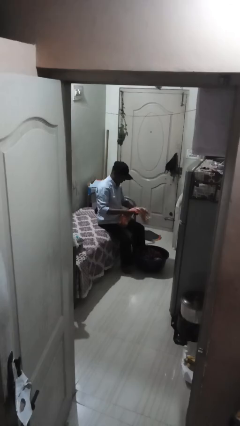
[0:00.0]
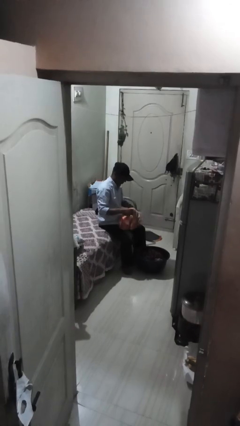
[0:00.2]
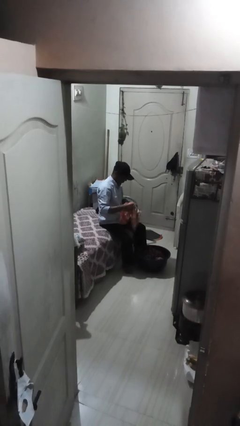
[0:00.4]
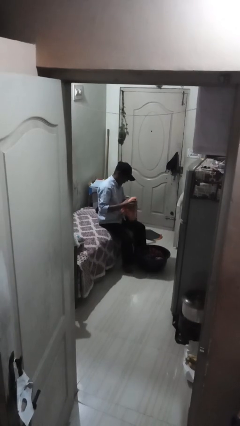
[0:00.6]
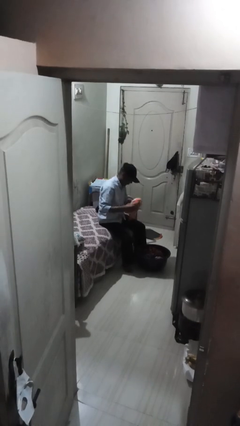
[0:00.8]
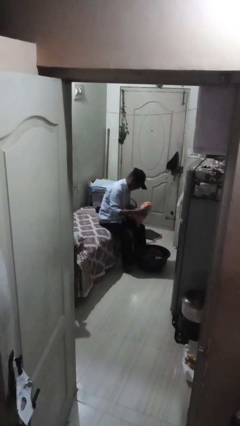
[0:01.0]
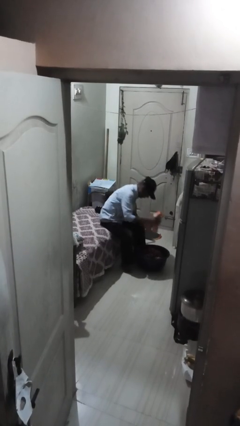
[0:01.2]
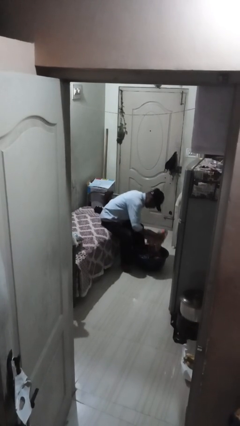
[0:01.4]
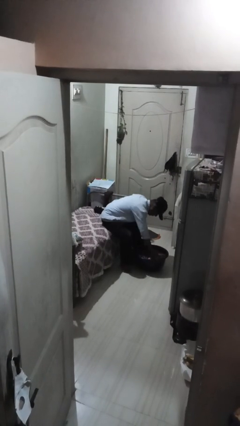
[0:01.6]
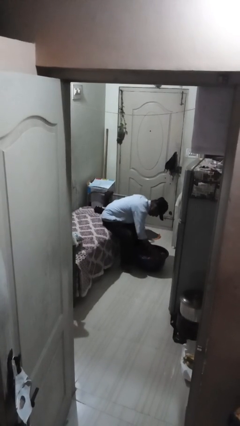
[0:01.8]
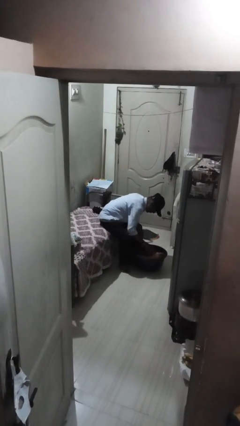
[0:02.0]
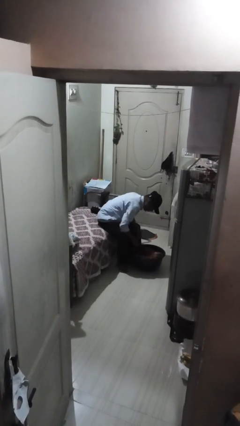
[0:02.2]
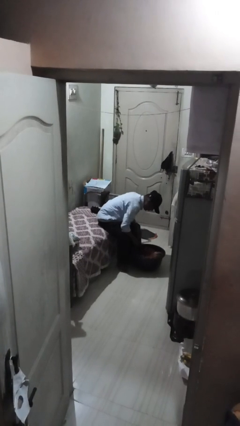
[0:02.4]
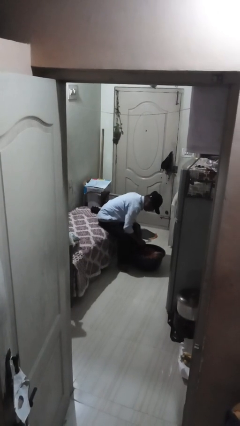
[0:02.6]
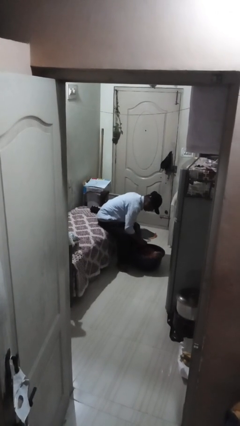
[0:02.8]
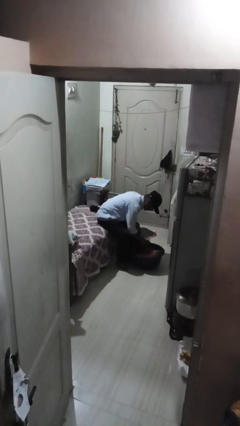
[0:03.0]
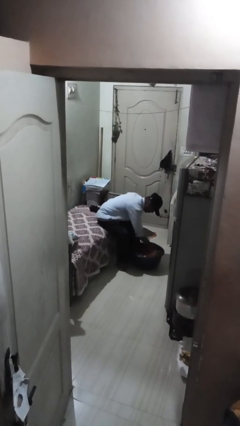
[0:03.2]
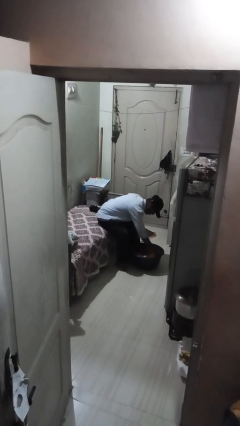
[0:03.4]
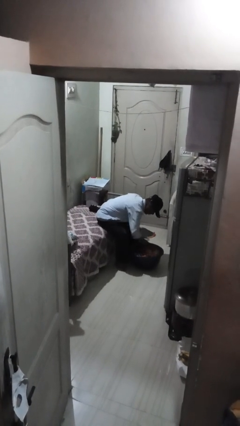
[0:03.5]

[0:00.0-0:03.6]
person puts object into basket

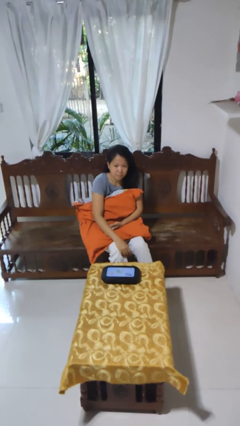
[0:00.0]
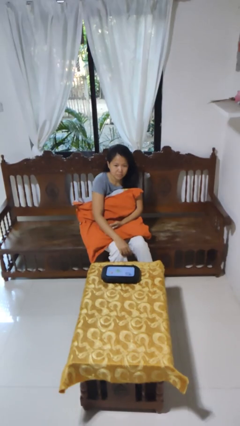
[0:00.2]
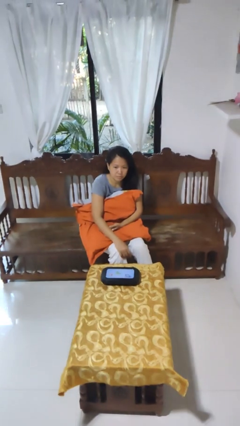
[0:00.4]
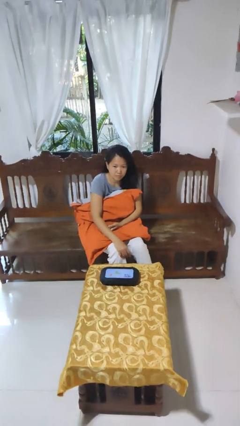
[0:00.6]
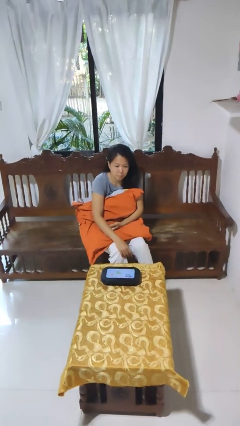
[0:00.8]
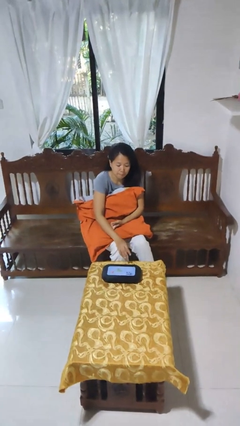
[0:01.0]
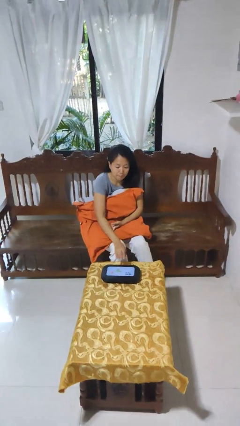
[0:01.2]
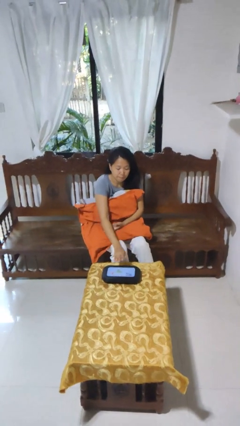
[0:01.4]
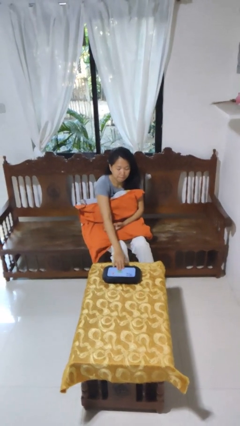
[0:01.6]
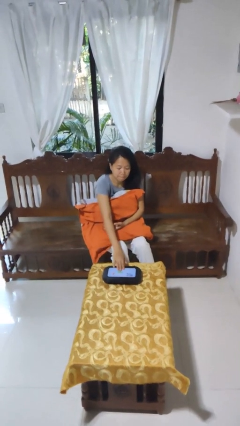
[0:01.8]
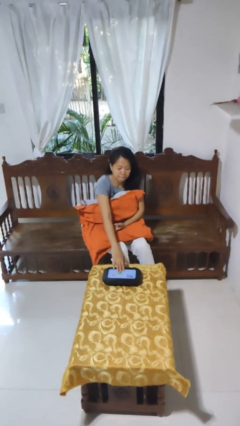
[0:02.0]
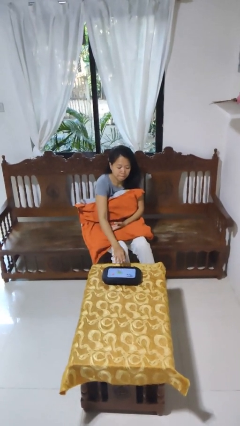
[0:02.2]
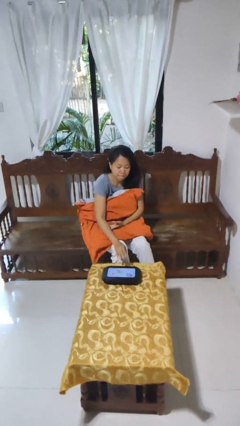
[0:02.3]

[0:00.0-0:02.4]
person taps object with finger

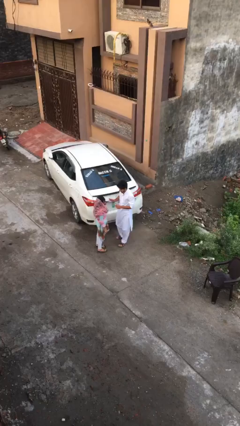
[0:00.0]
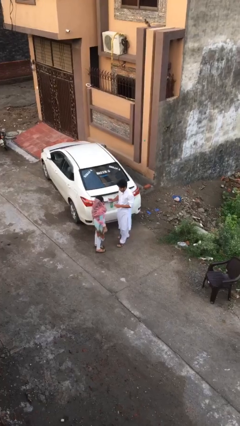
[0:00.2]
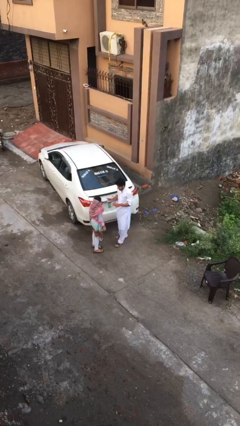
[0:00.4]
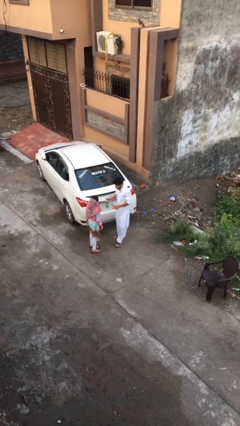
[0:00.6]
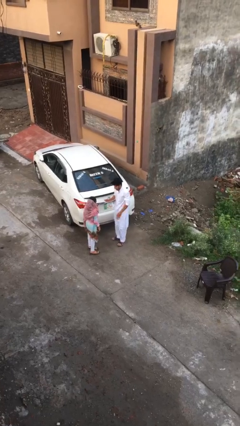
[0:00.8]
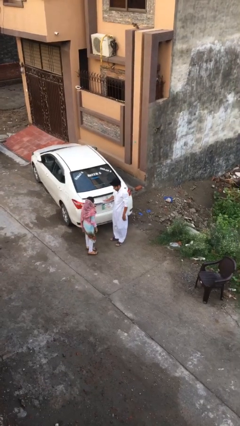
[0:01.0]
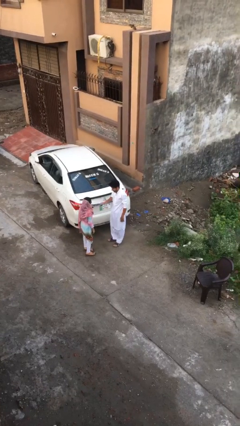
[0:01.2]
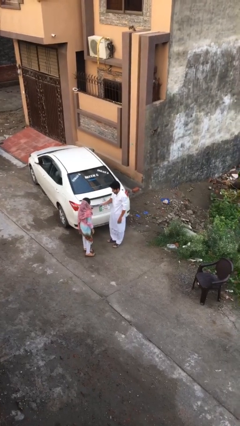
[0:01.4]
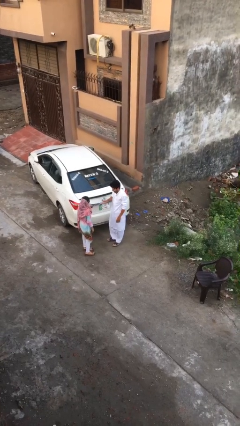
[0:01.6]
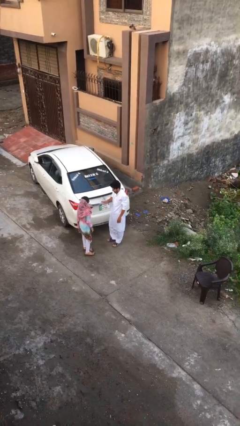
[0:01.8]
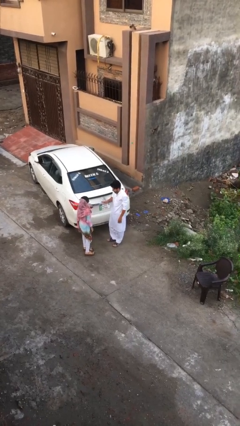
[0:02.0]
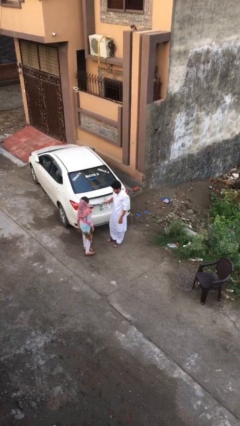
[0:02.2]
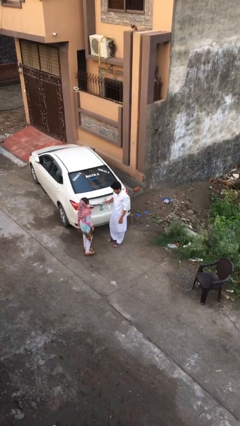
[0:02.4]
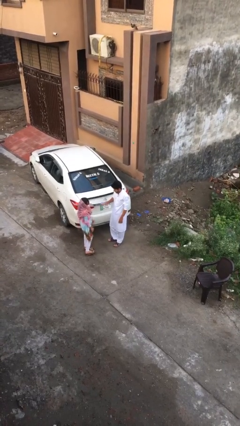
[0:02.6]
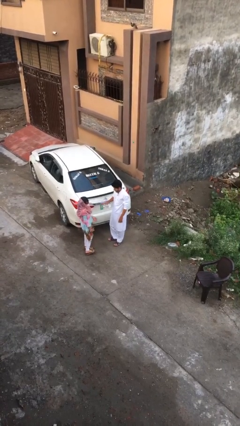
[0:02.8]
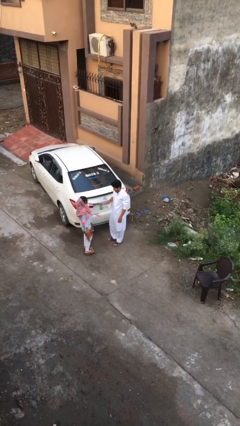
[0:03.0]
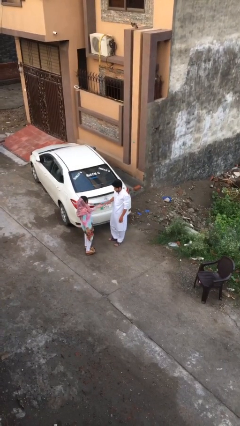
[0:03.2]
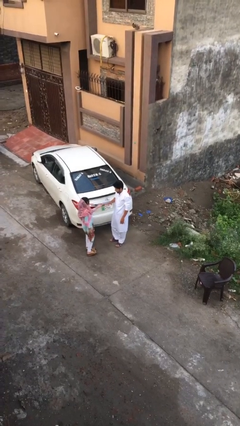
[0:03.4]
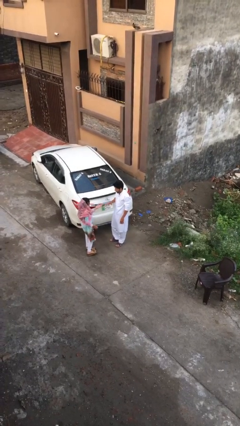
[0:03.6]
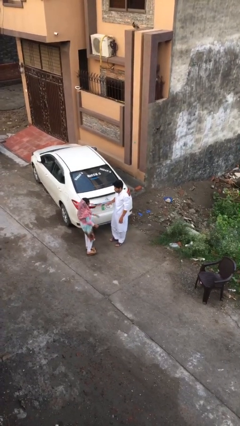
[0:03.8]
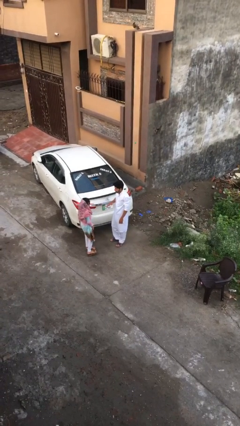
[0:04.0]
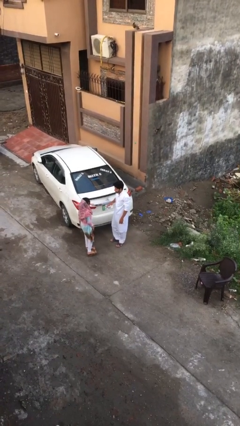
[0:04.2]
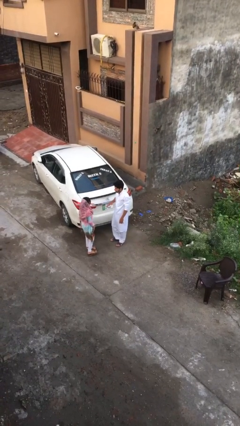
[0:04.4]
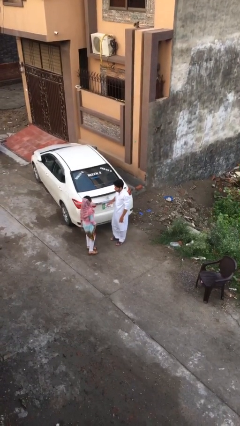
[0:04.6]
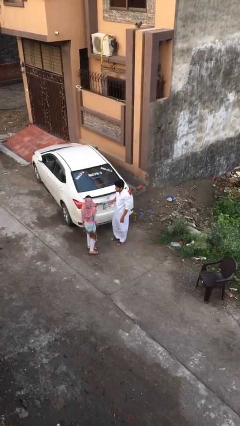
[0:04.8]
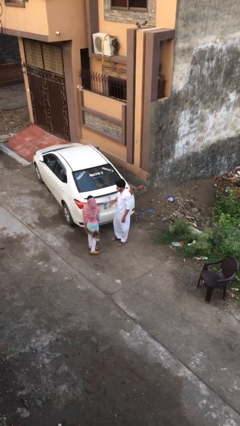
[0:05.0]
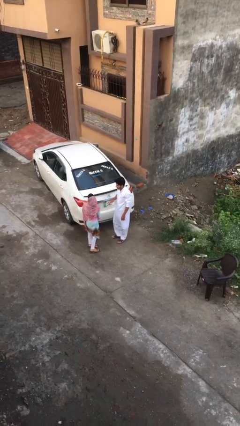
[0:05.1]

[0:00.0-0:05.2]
person talks to person

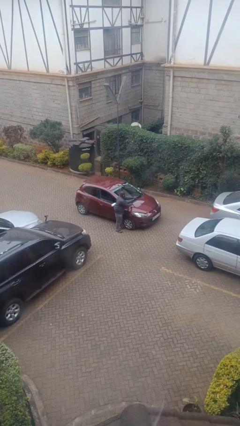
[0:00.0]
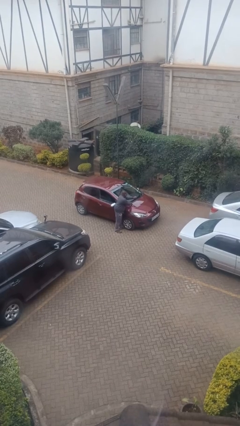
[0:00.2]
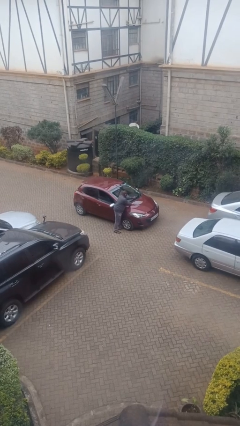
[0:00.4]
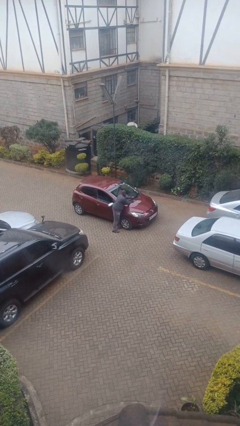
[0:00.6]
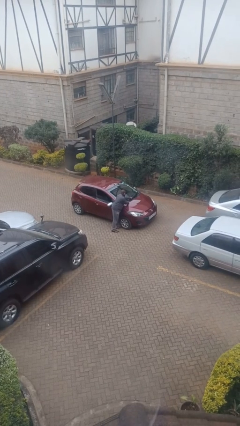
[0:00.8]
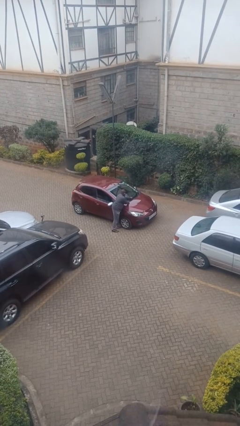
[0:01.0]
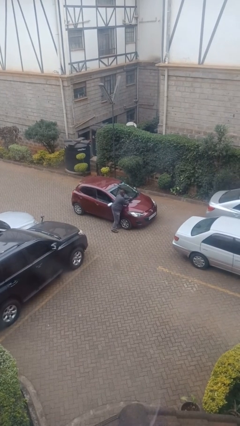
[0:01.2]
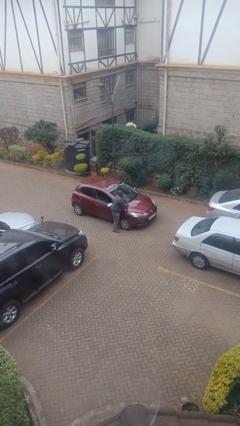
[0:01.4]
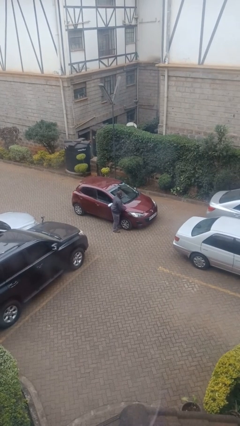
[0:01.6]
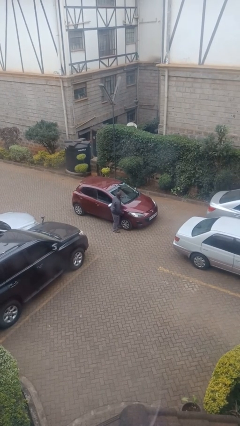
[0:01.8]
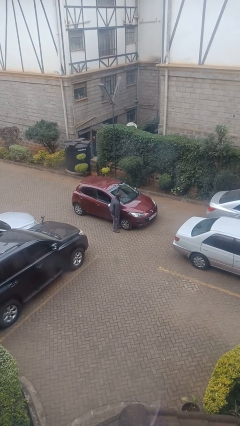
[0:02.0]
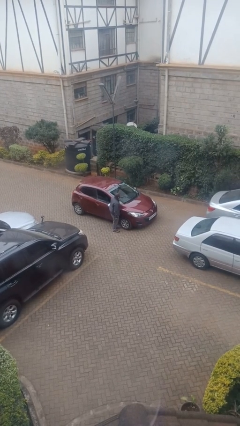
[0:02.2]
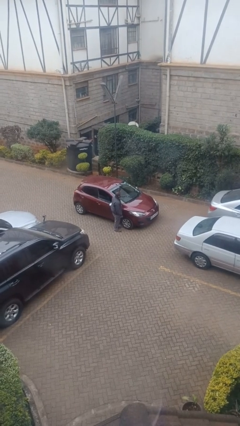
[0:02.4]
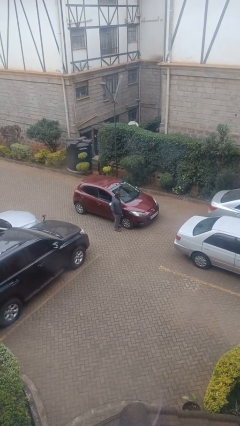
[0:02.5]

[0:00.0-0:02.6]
person flips down car wipers

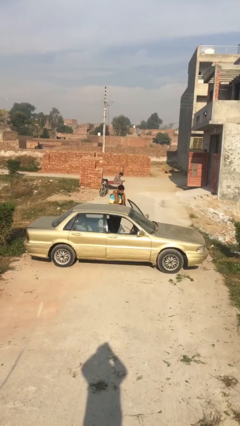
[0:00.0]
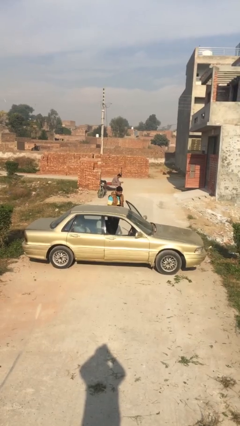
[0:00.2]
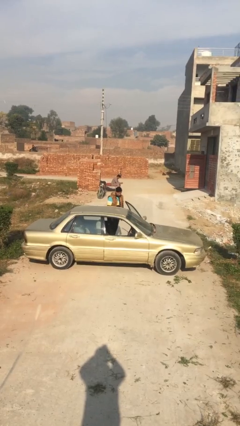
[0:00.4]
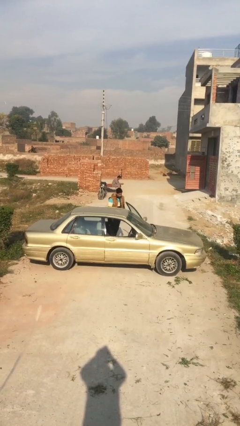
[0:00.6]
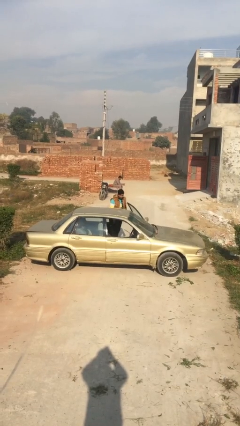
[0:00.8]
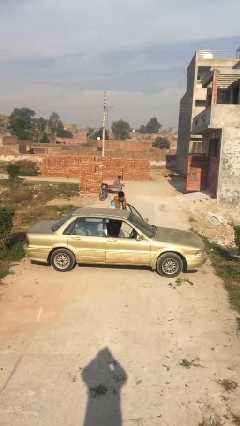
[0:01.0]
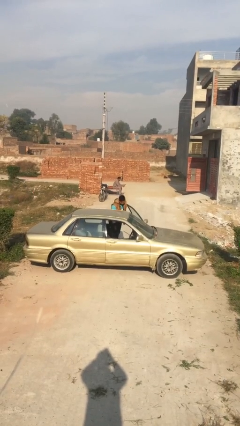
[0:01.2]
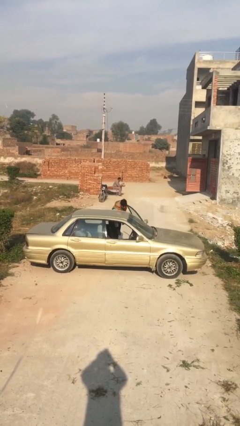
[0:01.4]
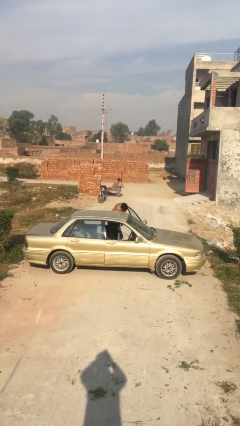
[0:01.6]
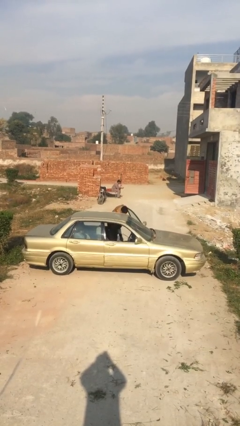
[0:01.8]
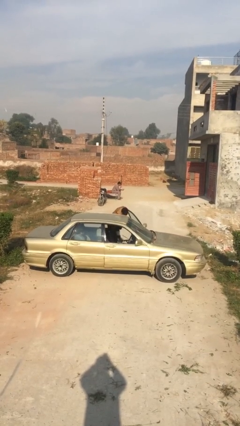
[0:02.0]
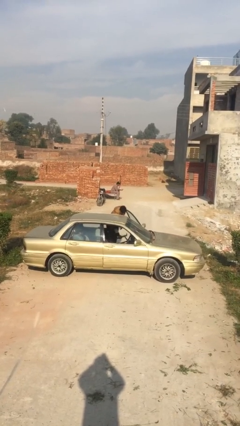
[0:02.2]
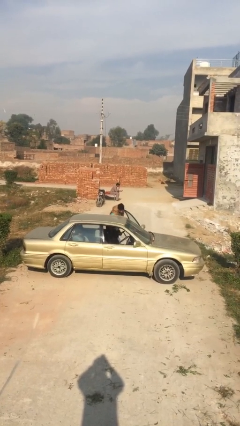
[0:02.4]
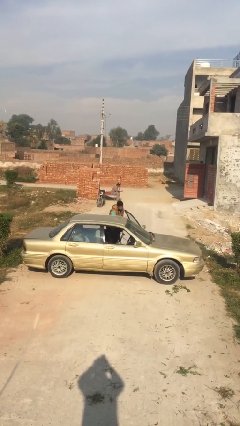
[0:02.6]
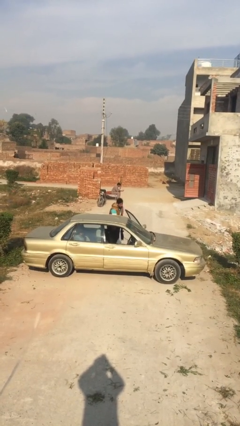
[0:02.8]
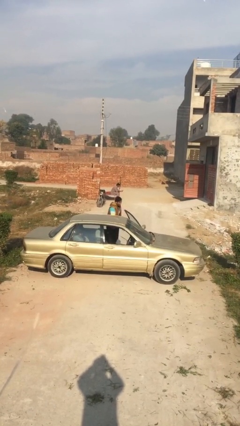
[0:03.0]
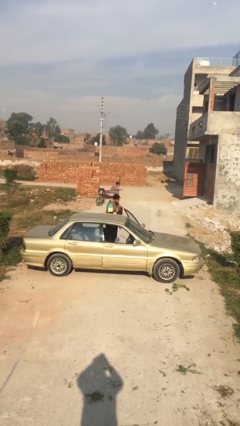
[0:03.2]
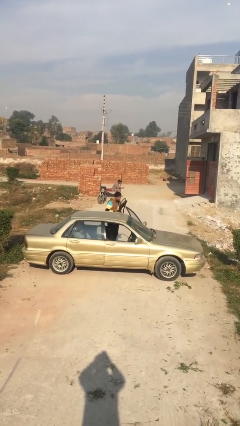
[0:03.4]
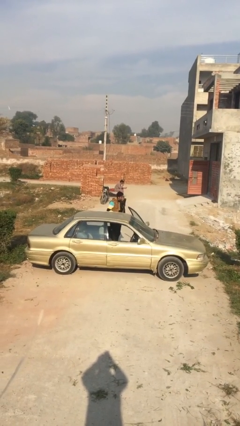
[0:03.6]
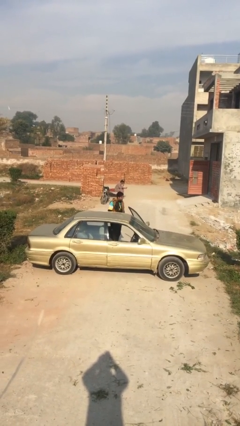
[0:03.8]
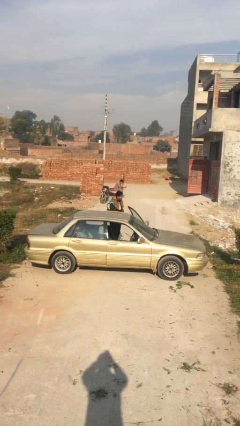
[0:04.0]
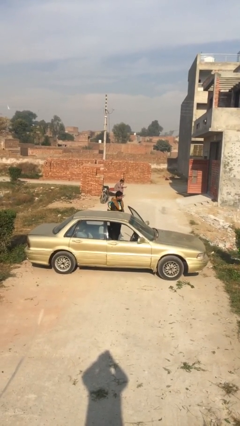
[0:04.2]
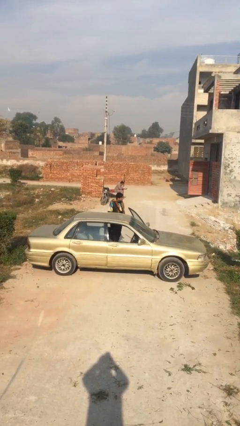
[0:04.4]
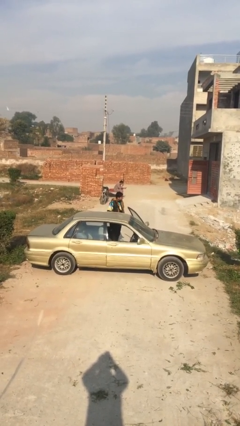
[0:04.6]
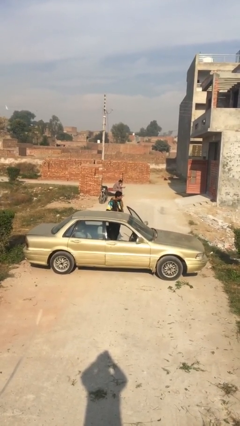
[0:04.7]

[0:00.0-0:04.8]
person unloads car
